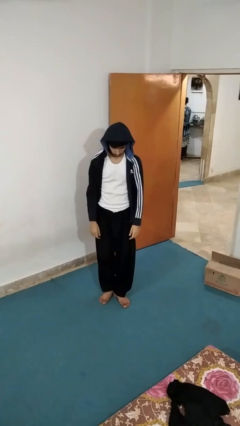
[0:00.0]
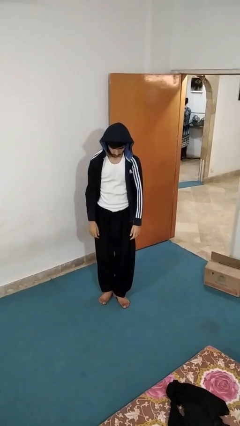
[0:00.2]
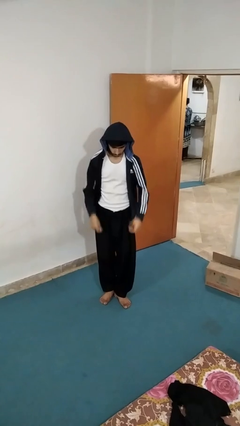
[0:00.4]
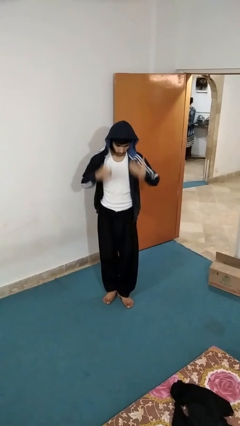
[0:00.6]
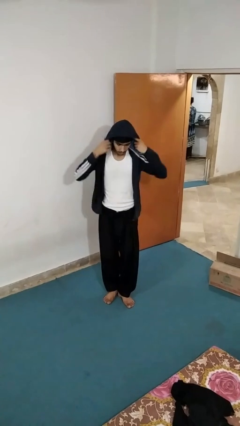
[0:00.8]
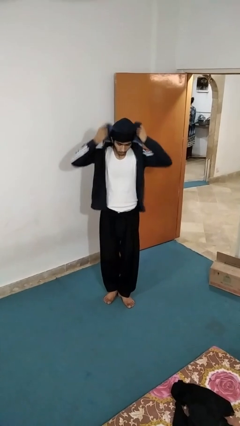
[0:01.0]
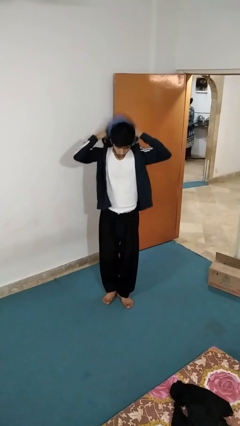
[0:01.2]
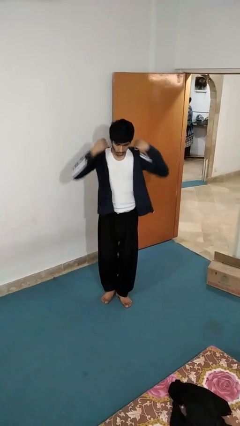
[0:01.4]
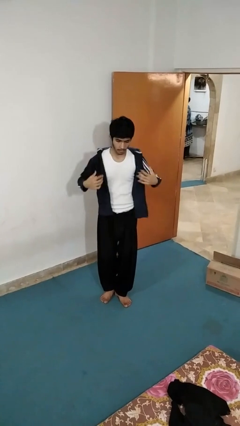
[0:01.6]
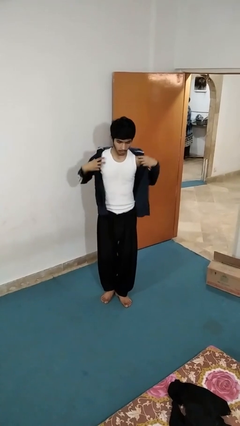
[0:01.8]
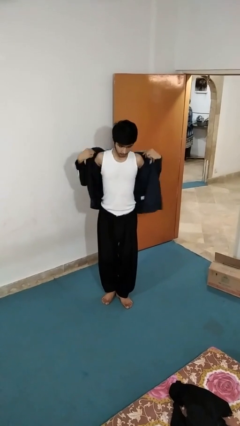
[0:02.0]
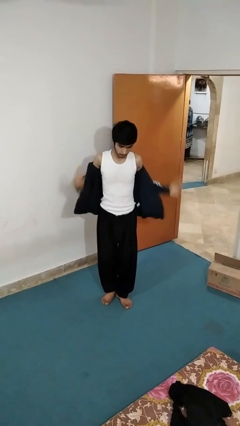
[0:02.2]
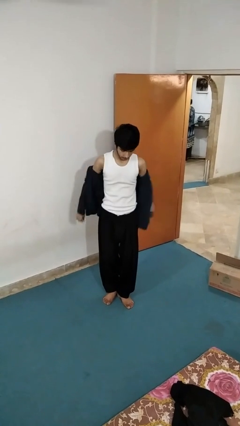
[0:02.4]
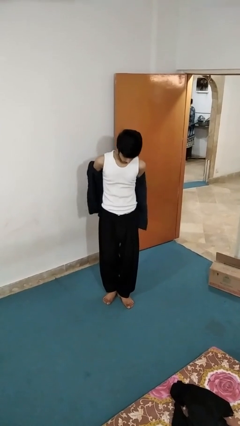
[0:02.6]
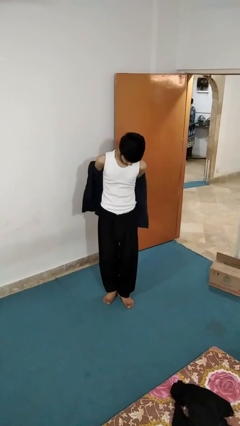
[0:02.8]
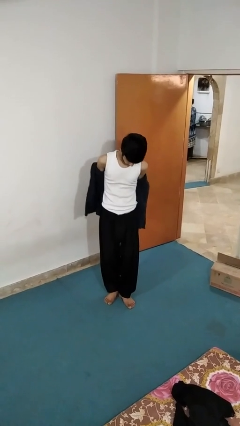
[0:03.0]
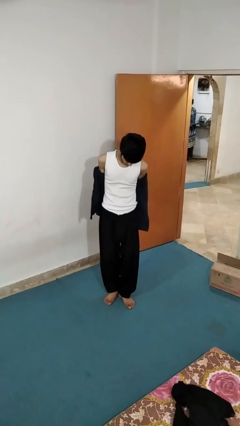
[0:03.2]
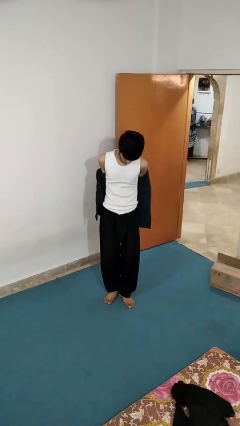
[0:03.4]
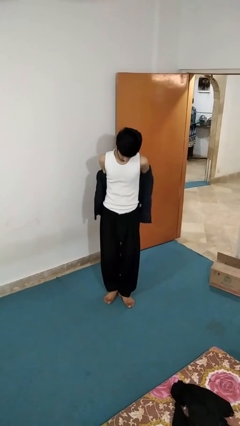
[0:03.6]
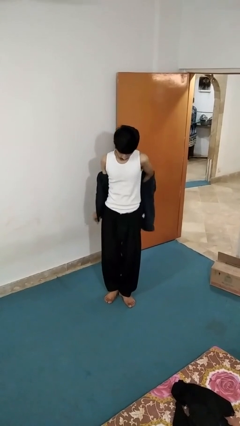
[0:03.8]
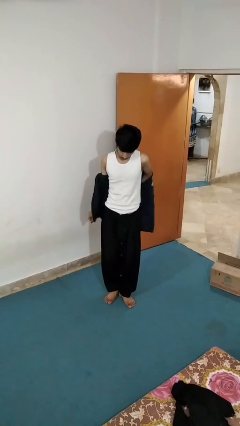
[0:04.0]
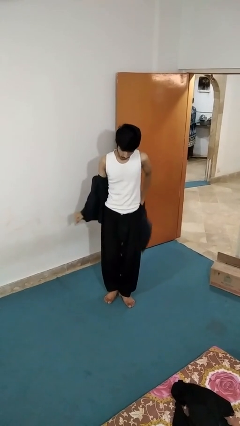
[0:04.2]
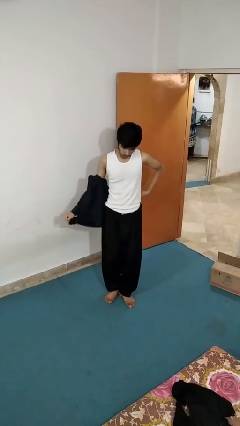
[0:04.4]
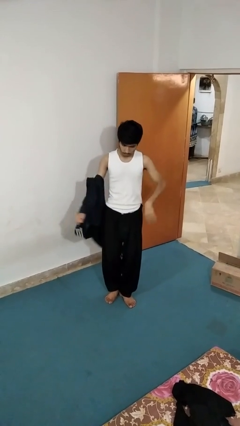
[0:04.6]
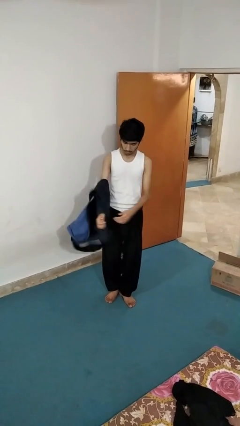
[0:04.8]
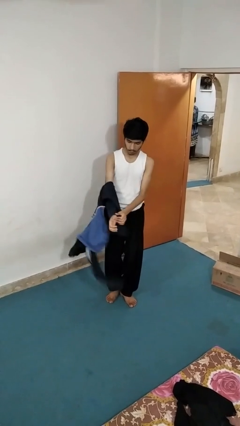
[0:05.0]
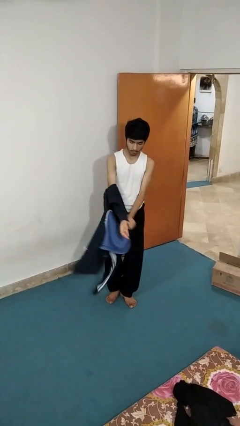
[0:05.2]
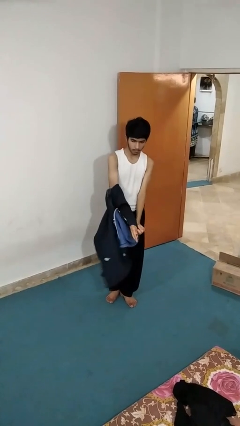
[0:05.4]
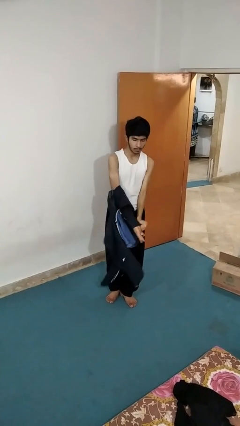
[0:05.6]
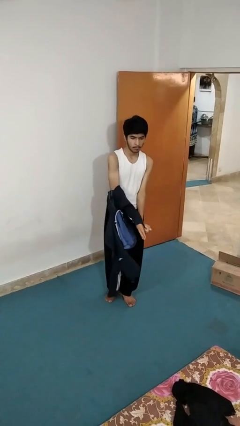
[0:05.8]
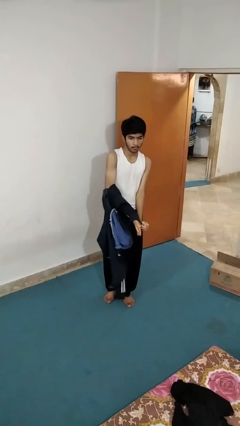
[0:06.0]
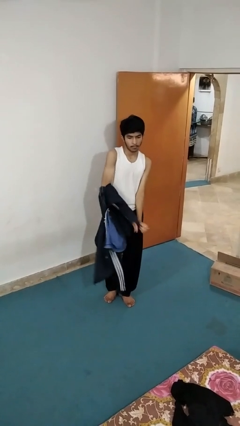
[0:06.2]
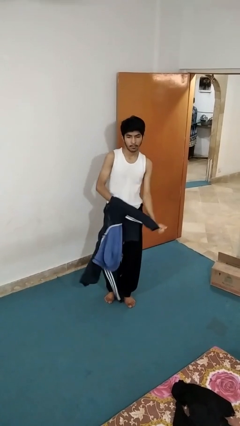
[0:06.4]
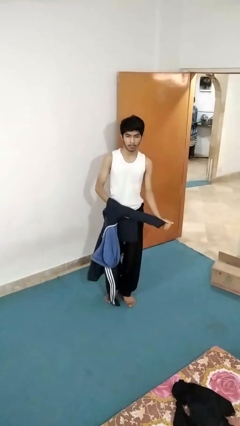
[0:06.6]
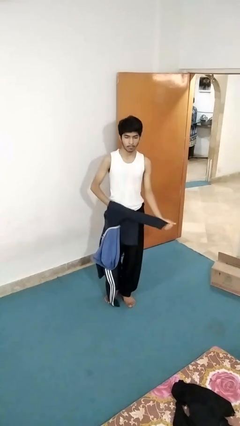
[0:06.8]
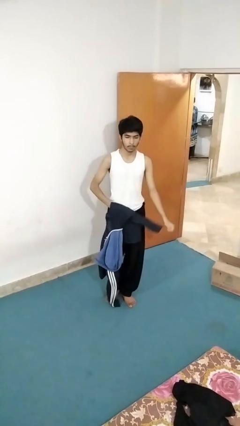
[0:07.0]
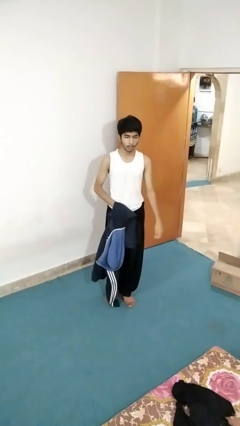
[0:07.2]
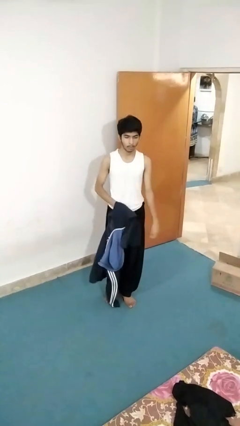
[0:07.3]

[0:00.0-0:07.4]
person takes off hoodie

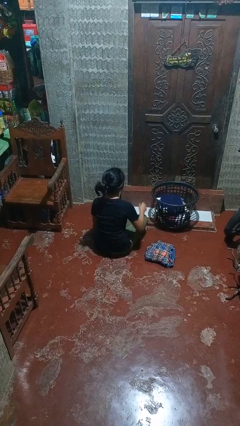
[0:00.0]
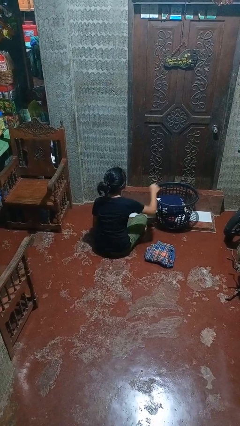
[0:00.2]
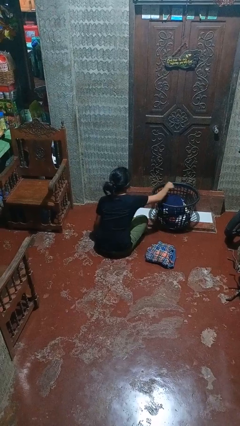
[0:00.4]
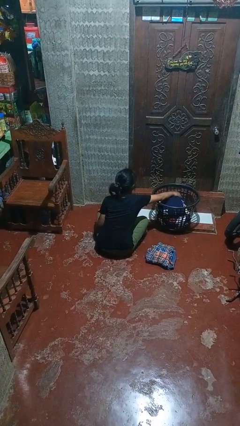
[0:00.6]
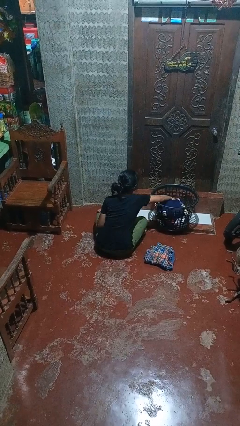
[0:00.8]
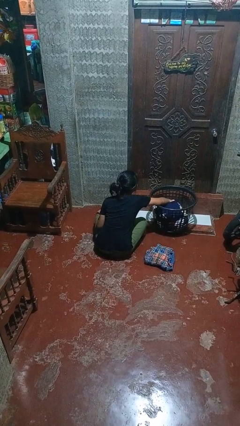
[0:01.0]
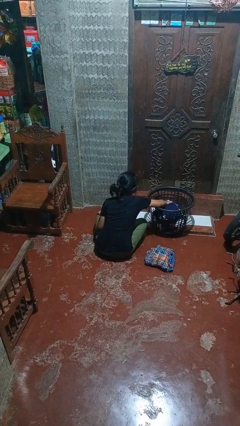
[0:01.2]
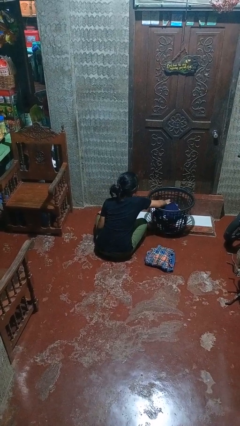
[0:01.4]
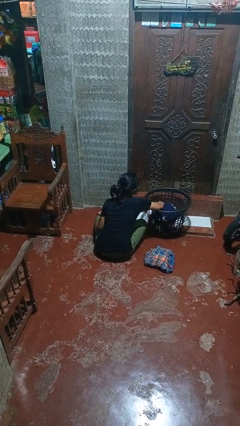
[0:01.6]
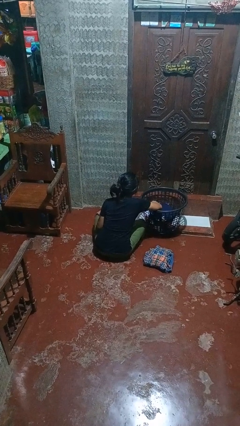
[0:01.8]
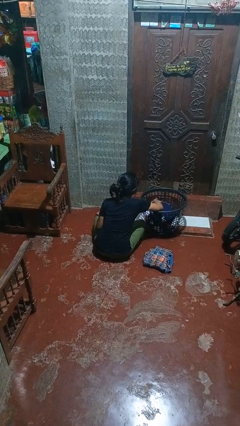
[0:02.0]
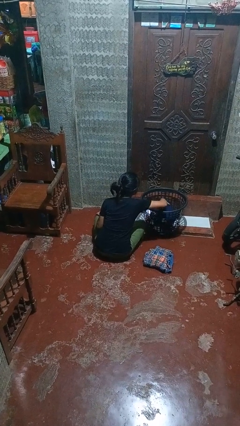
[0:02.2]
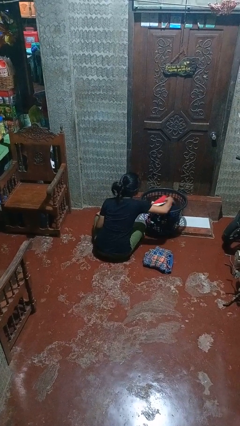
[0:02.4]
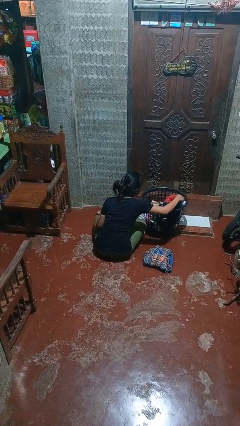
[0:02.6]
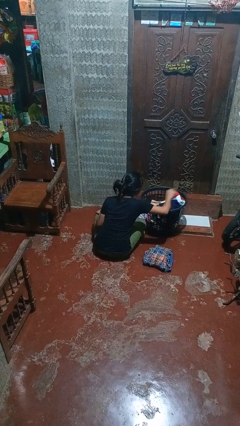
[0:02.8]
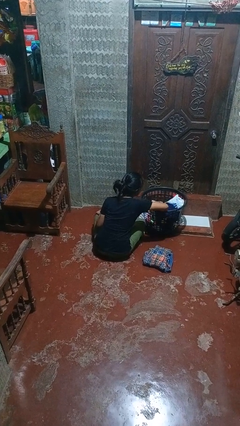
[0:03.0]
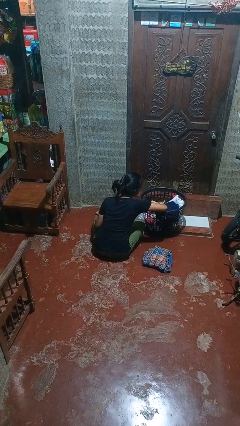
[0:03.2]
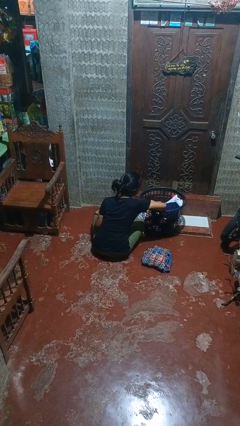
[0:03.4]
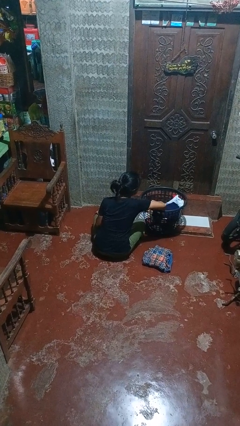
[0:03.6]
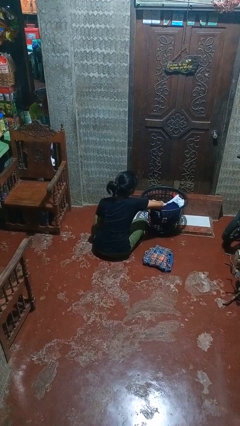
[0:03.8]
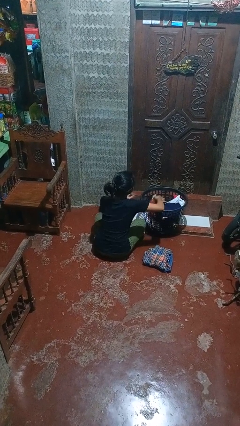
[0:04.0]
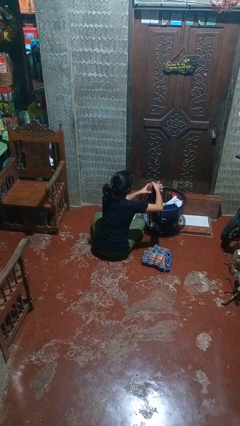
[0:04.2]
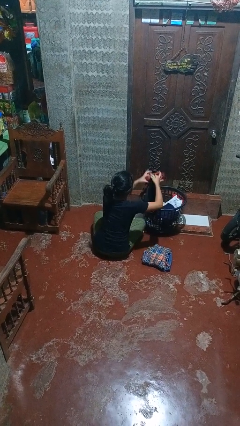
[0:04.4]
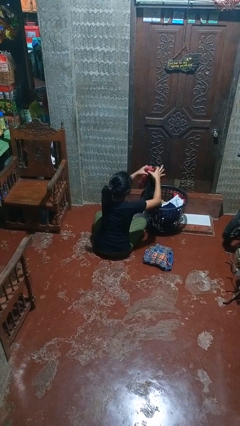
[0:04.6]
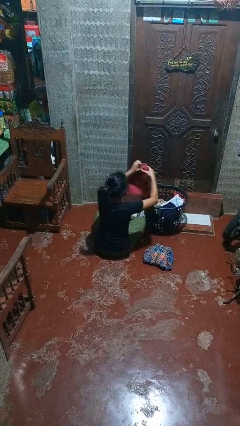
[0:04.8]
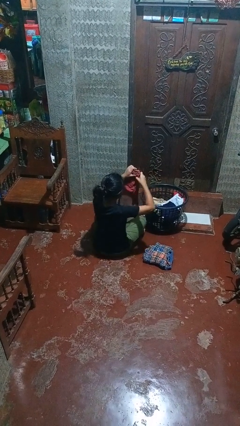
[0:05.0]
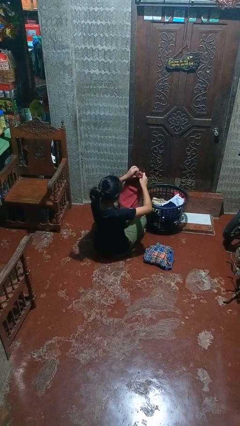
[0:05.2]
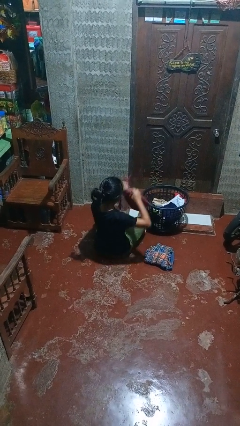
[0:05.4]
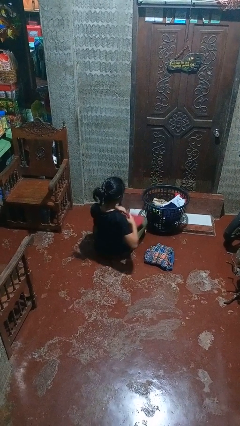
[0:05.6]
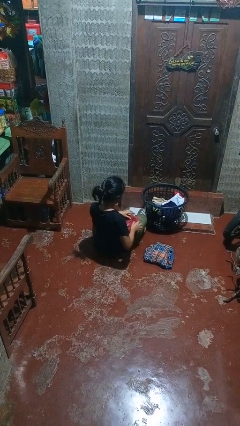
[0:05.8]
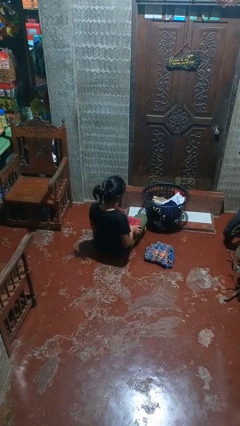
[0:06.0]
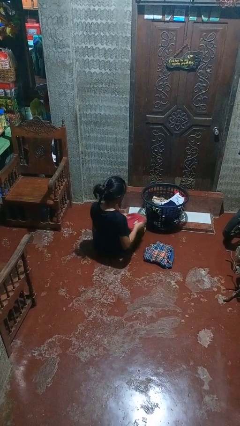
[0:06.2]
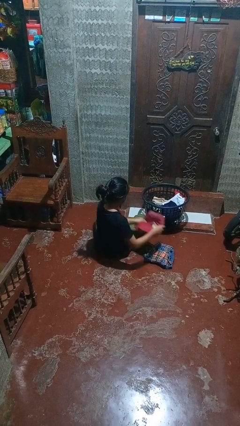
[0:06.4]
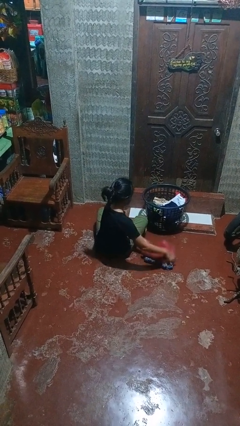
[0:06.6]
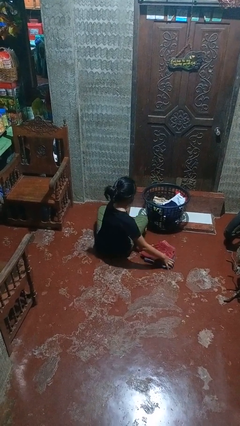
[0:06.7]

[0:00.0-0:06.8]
person folds pants

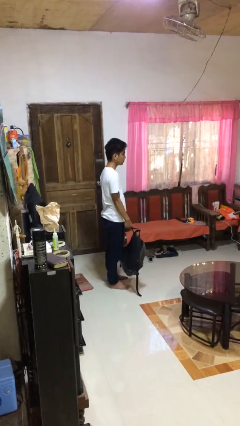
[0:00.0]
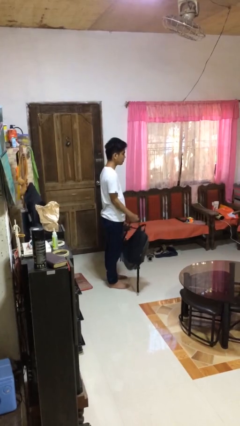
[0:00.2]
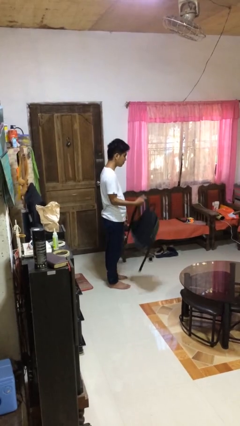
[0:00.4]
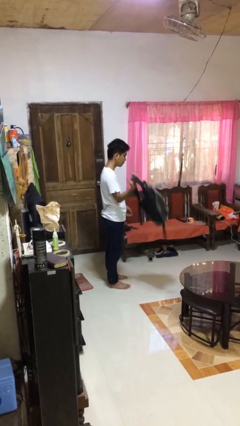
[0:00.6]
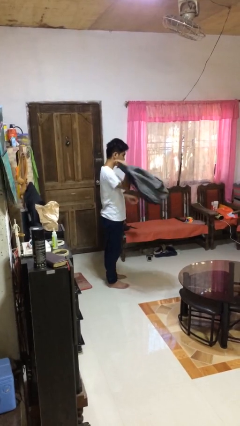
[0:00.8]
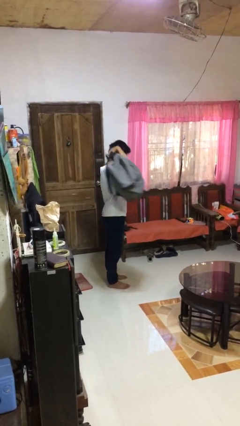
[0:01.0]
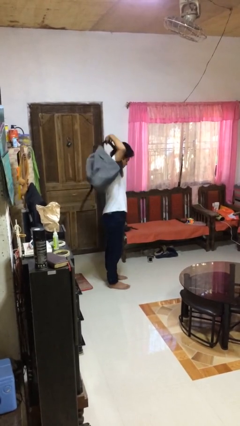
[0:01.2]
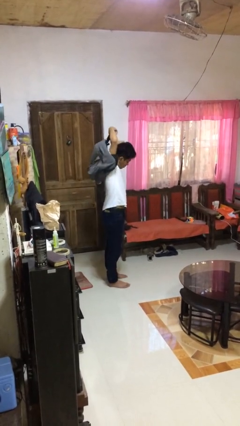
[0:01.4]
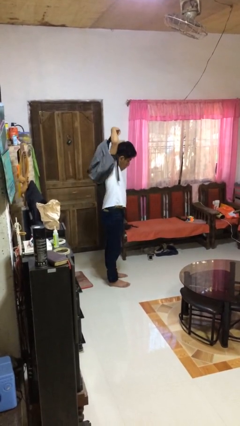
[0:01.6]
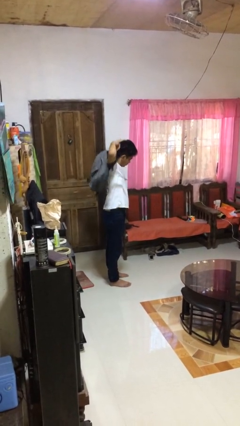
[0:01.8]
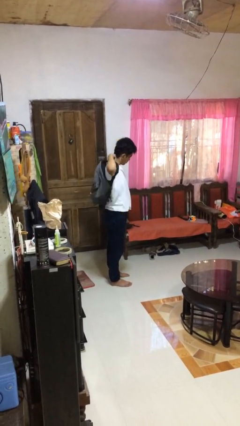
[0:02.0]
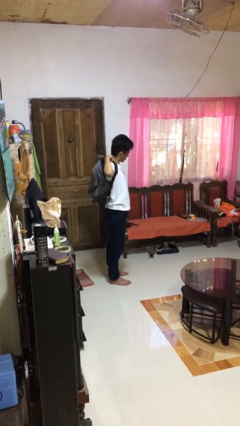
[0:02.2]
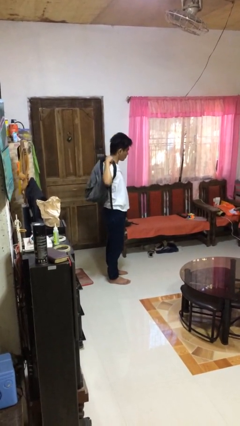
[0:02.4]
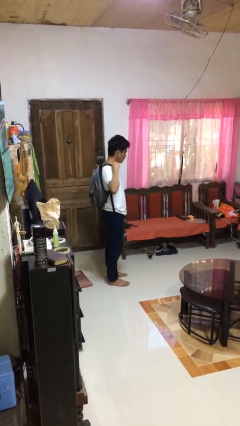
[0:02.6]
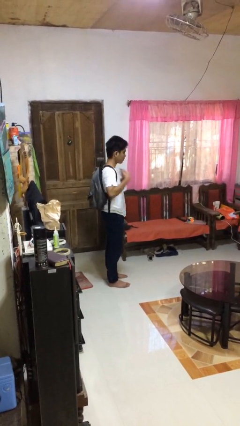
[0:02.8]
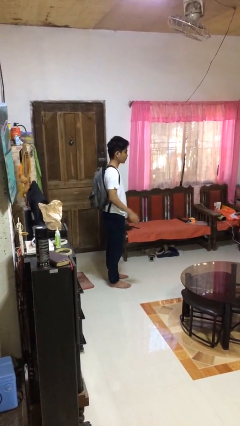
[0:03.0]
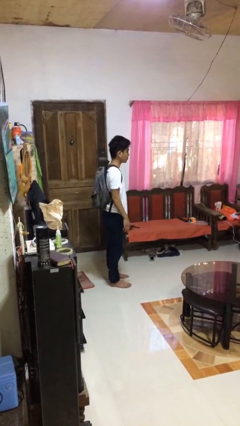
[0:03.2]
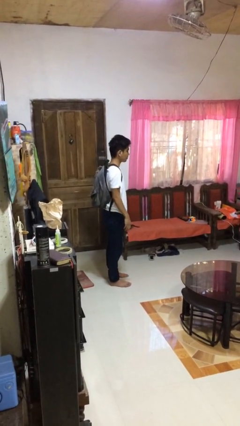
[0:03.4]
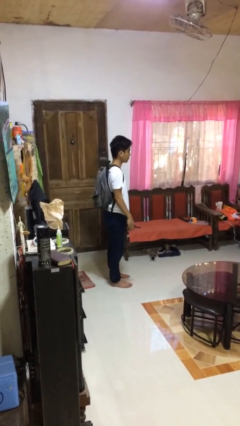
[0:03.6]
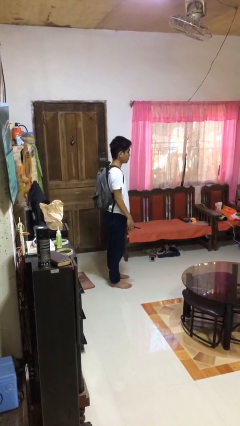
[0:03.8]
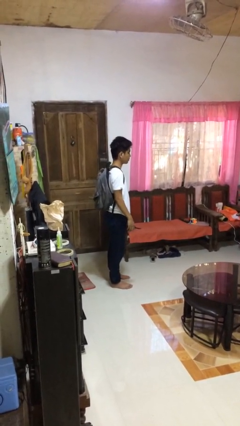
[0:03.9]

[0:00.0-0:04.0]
person puts on backpack
